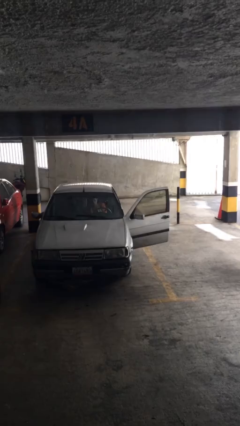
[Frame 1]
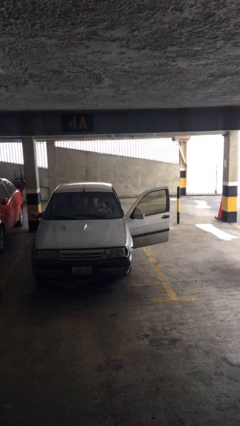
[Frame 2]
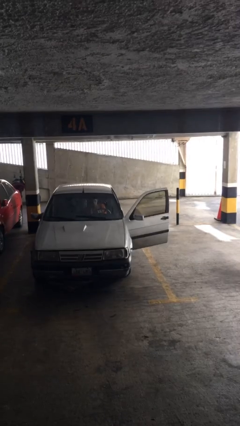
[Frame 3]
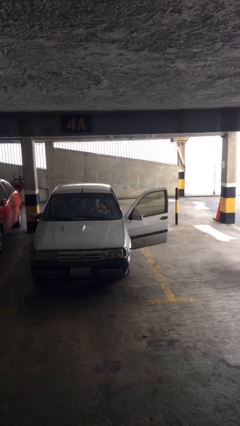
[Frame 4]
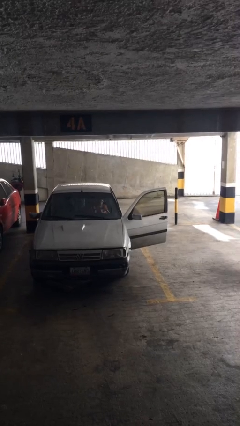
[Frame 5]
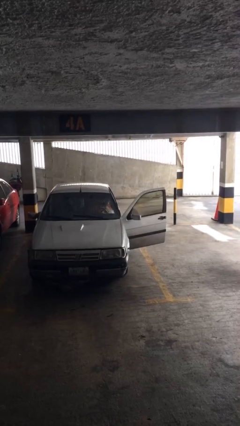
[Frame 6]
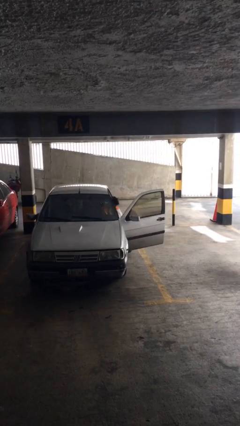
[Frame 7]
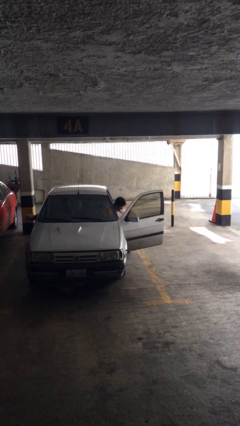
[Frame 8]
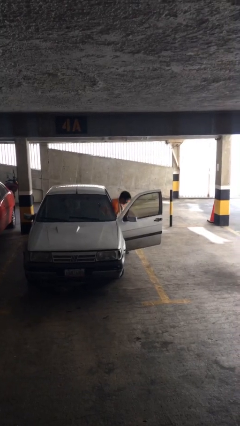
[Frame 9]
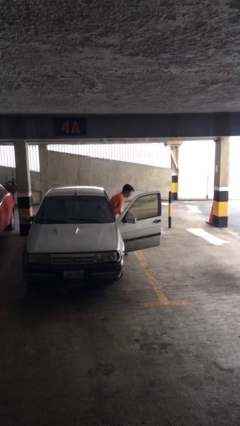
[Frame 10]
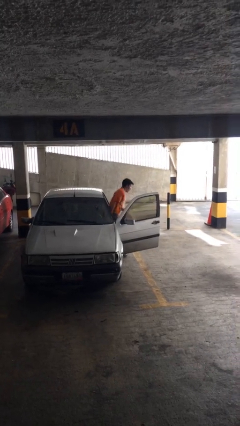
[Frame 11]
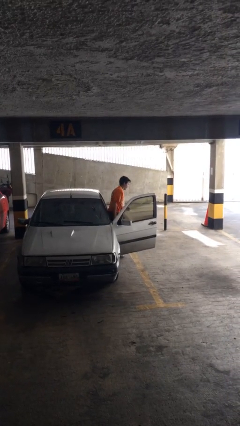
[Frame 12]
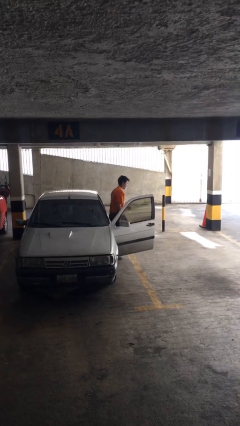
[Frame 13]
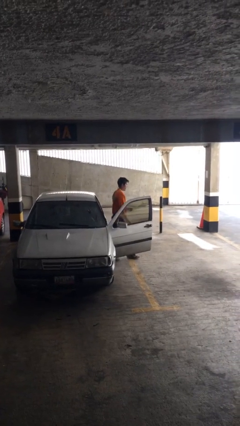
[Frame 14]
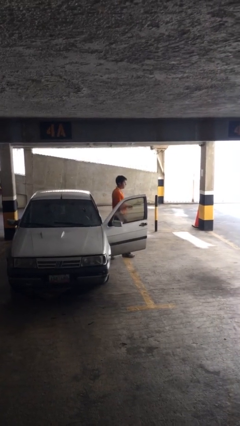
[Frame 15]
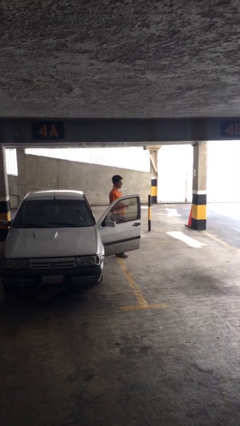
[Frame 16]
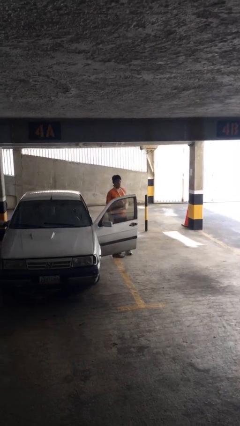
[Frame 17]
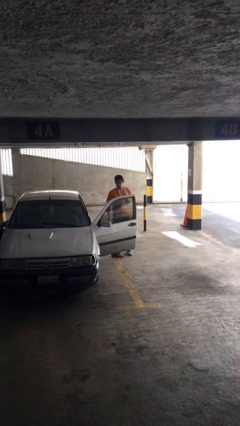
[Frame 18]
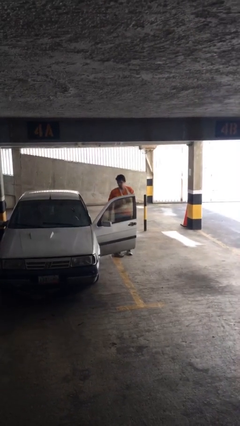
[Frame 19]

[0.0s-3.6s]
person exits car

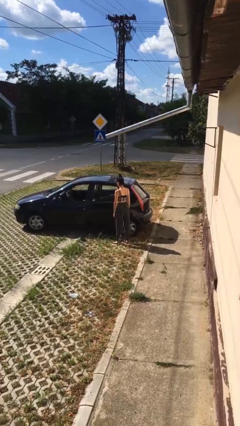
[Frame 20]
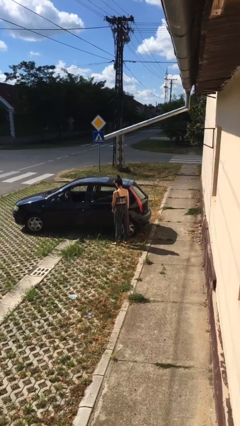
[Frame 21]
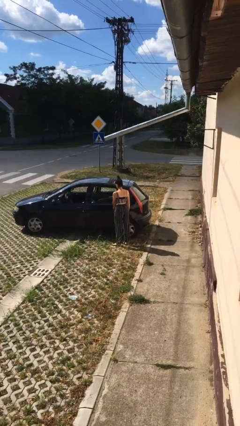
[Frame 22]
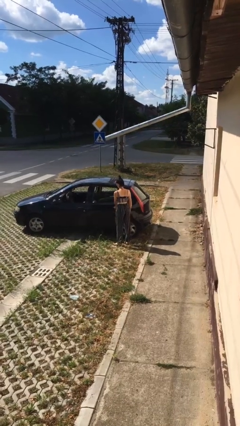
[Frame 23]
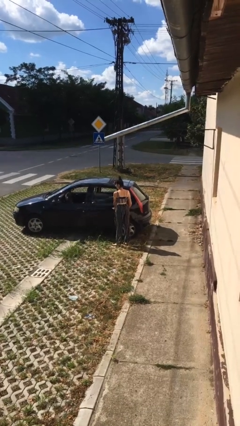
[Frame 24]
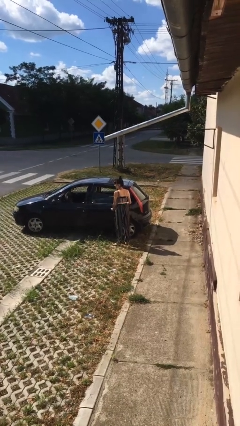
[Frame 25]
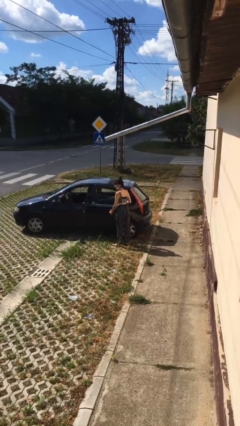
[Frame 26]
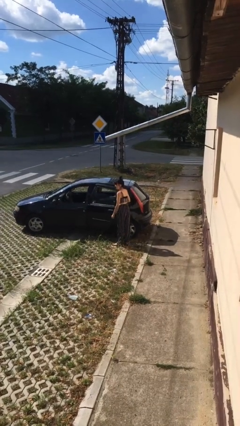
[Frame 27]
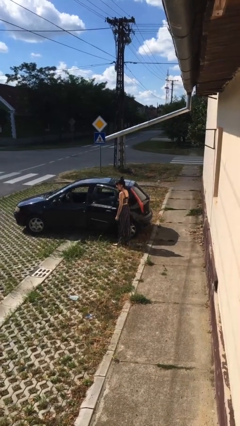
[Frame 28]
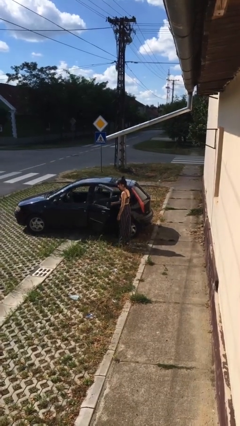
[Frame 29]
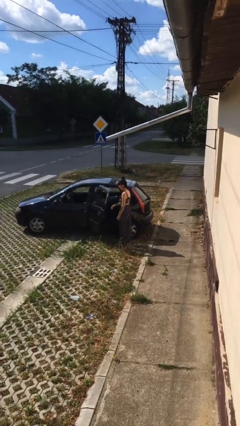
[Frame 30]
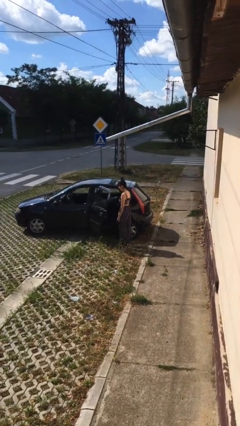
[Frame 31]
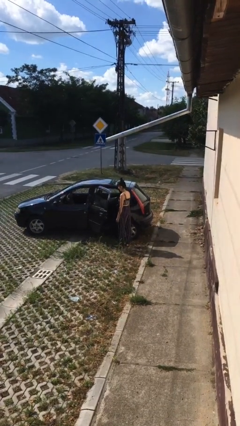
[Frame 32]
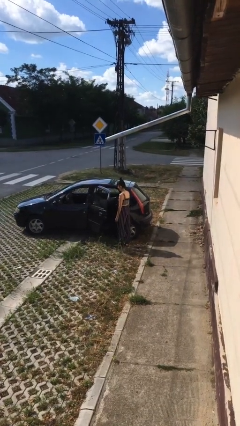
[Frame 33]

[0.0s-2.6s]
person opens car door

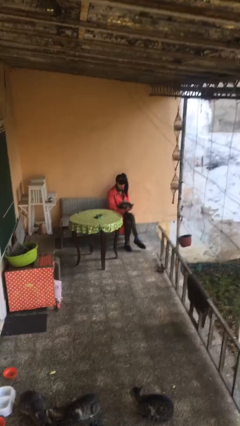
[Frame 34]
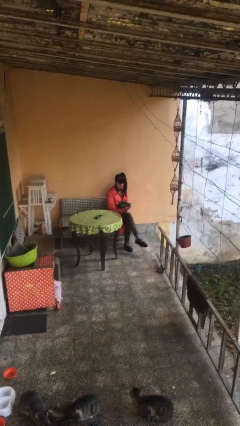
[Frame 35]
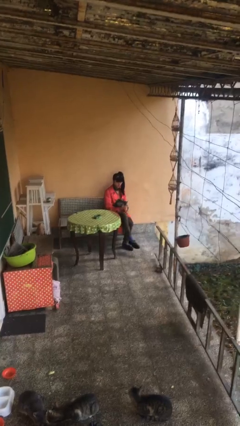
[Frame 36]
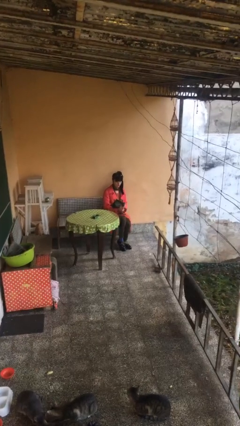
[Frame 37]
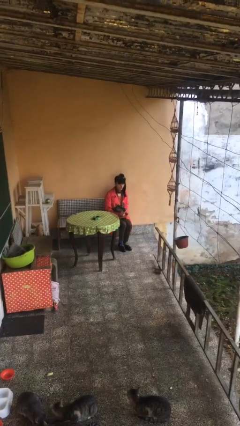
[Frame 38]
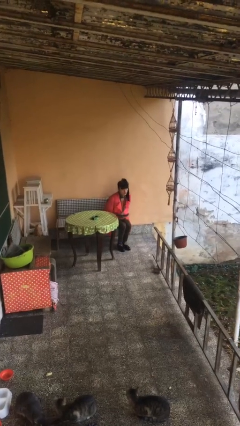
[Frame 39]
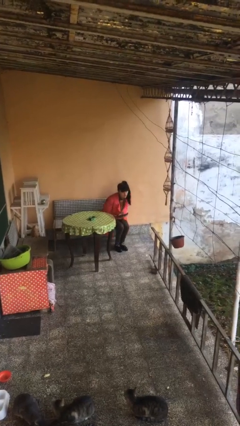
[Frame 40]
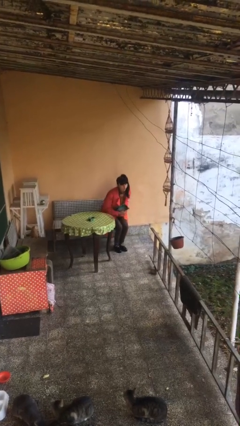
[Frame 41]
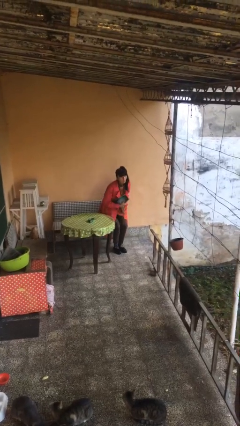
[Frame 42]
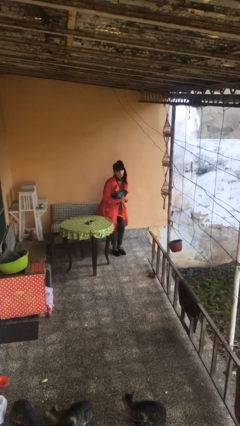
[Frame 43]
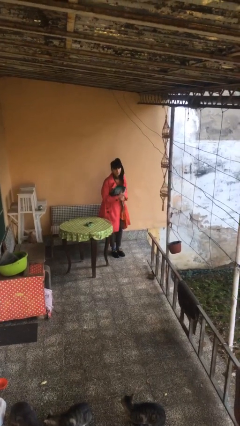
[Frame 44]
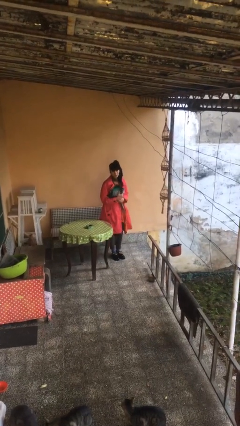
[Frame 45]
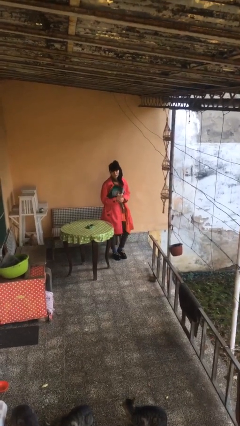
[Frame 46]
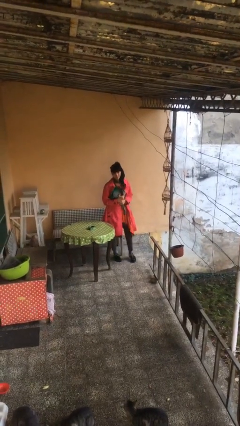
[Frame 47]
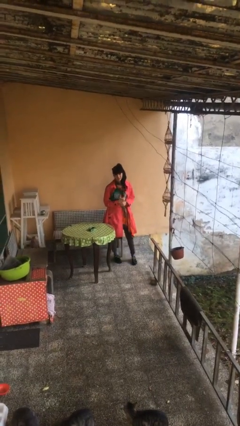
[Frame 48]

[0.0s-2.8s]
person stands up

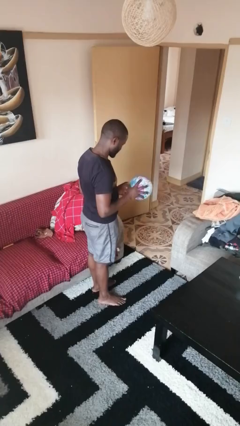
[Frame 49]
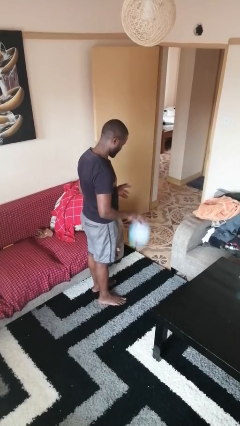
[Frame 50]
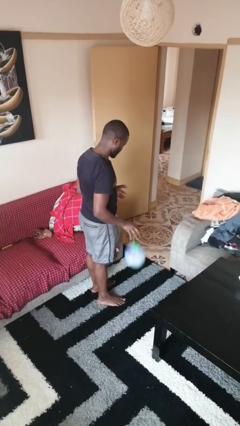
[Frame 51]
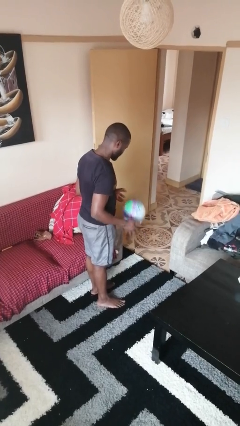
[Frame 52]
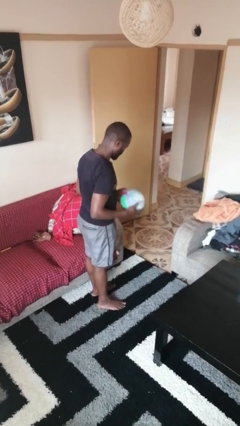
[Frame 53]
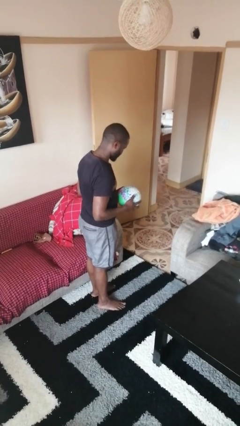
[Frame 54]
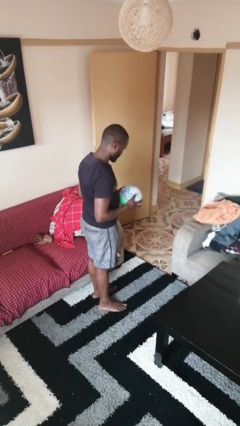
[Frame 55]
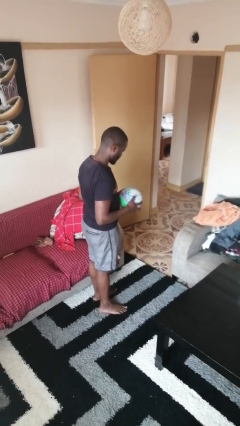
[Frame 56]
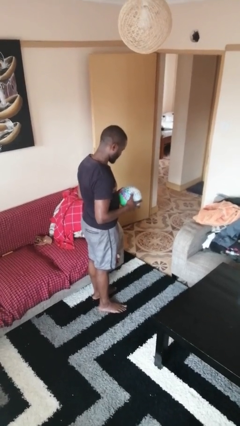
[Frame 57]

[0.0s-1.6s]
person bounces ball on floor

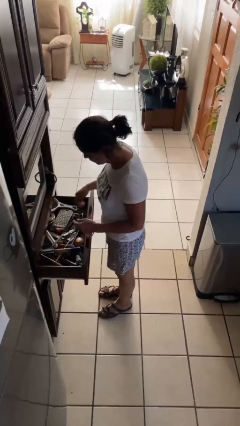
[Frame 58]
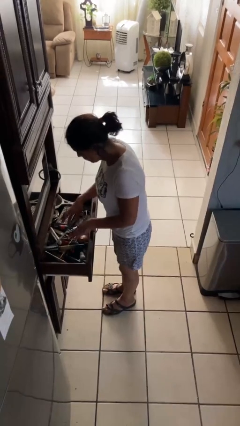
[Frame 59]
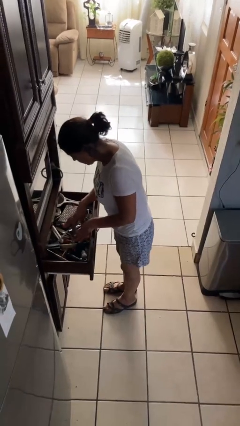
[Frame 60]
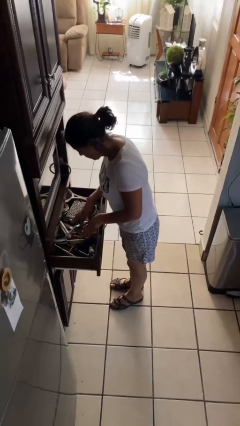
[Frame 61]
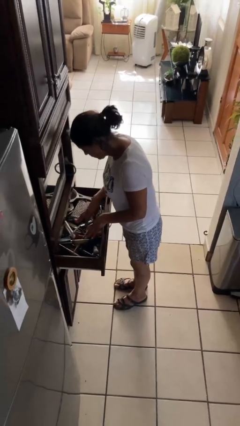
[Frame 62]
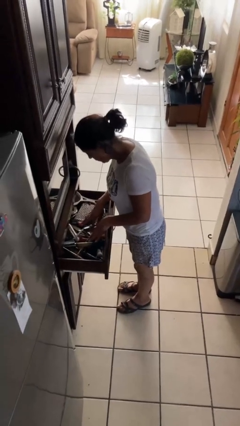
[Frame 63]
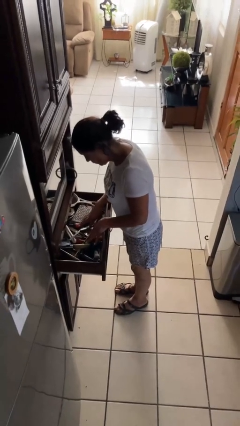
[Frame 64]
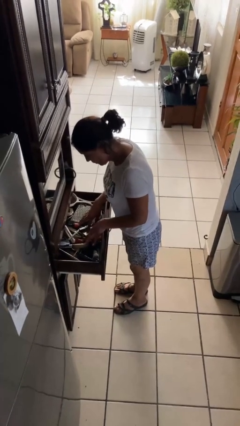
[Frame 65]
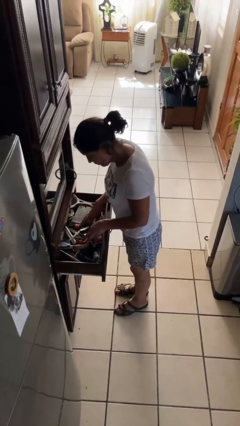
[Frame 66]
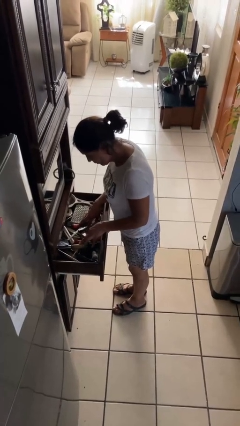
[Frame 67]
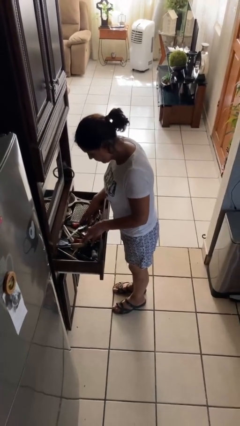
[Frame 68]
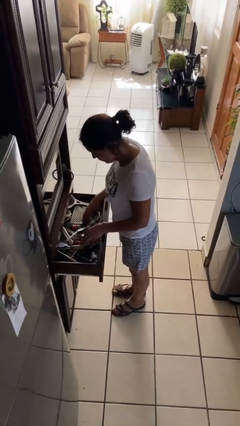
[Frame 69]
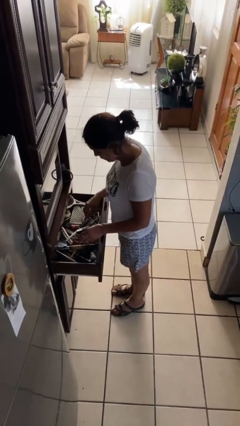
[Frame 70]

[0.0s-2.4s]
person searches in kitchen drawer

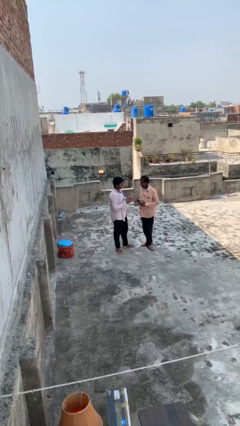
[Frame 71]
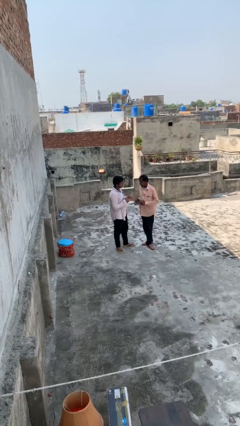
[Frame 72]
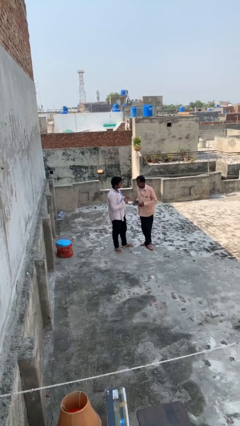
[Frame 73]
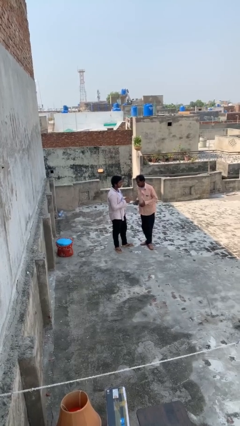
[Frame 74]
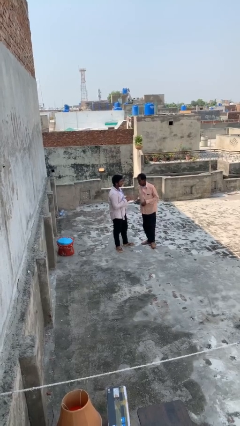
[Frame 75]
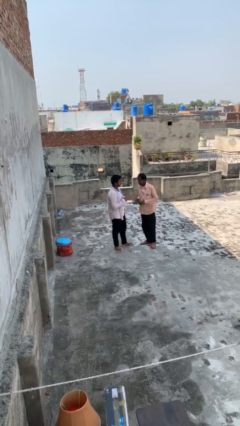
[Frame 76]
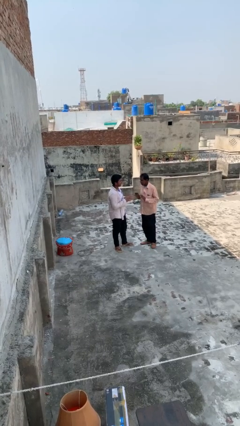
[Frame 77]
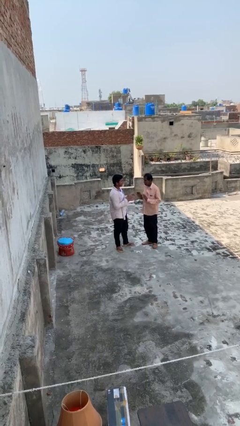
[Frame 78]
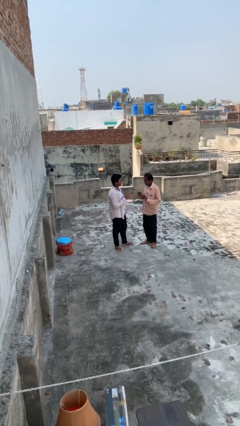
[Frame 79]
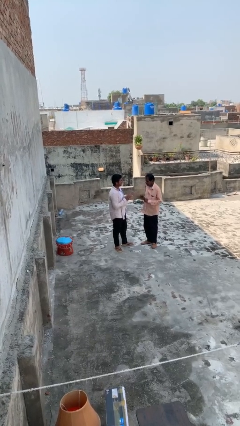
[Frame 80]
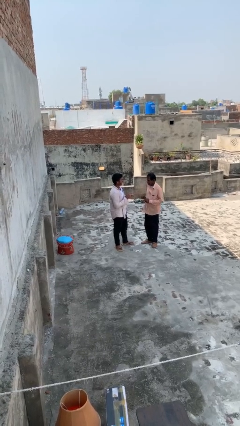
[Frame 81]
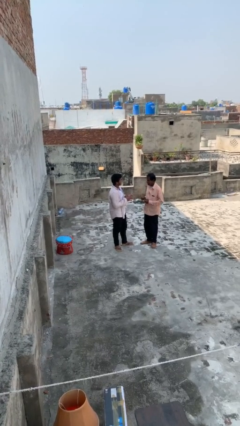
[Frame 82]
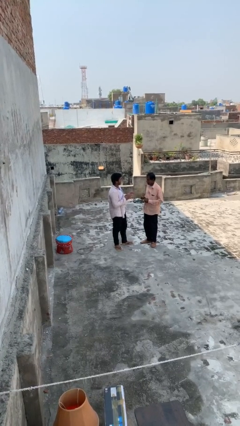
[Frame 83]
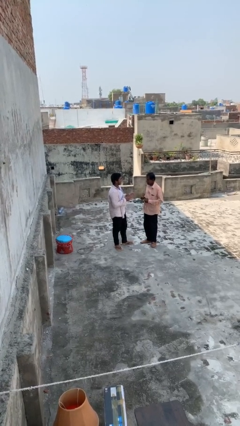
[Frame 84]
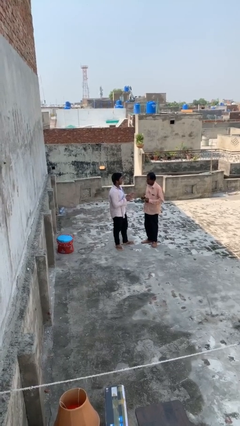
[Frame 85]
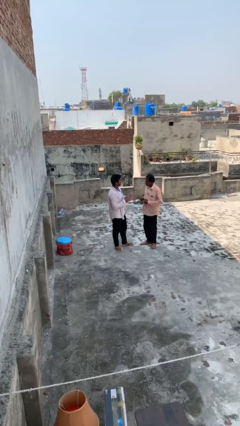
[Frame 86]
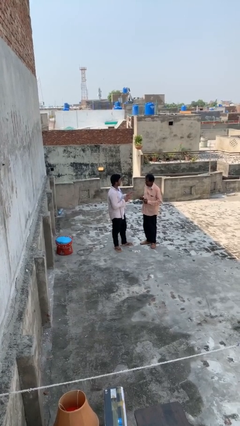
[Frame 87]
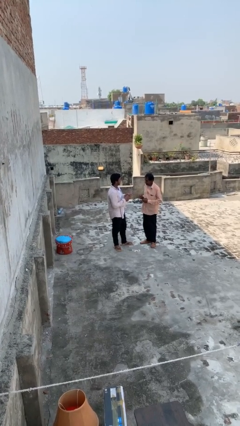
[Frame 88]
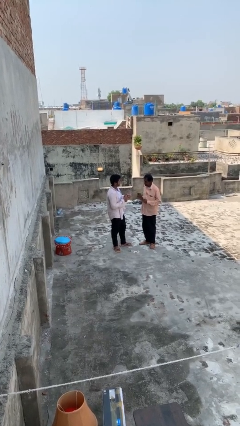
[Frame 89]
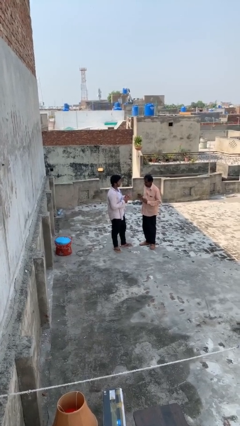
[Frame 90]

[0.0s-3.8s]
person talks to person

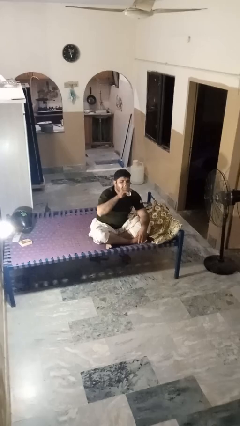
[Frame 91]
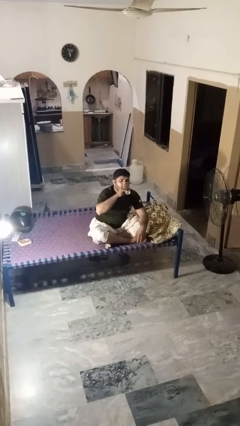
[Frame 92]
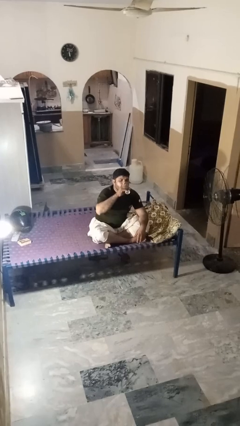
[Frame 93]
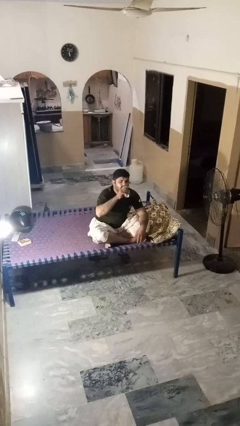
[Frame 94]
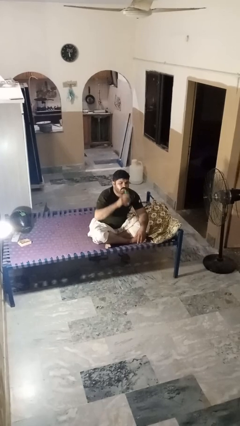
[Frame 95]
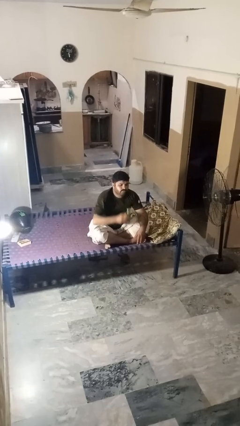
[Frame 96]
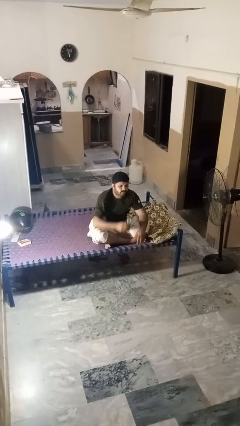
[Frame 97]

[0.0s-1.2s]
person drinks from beverage can
